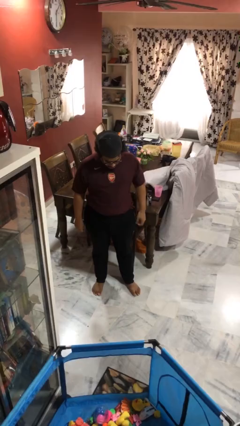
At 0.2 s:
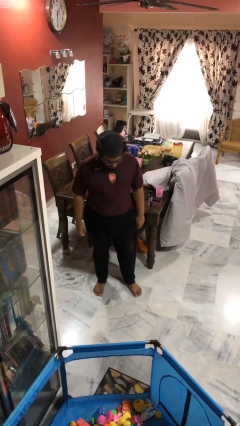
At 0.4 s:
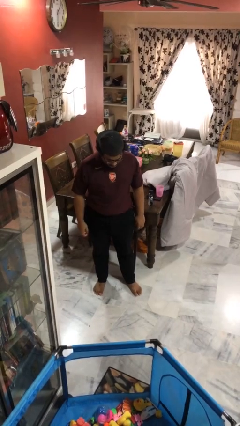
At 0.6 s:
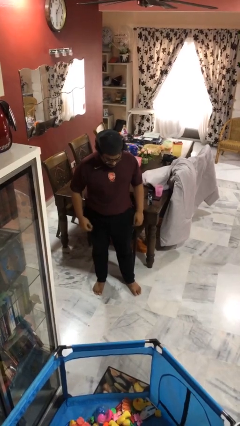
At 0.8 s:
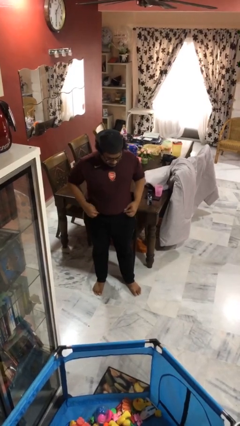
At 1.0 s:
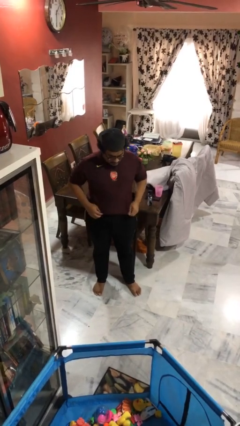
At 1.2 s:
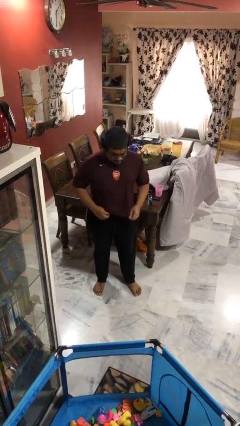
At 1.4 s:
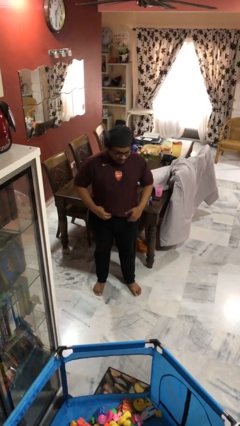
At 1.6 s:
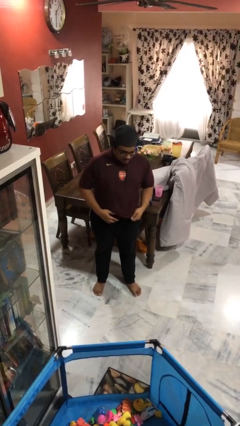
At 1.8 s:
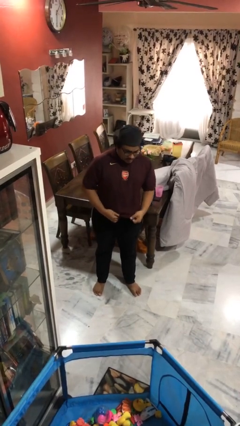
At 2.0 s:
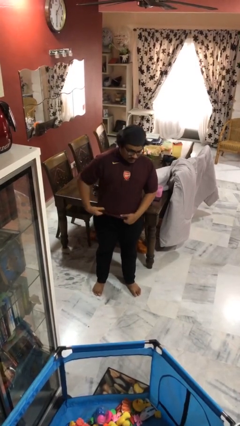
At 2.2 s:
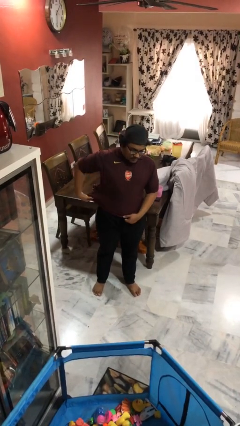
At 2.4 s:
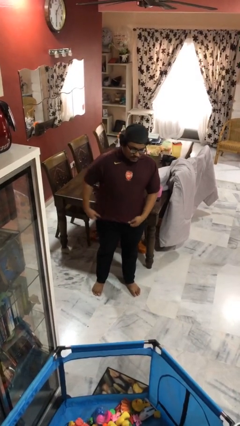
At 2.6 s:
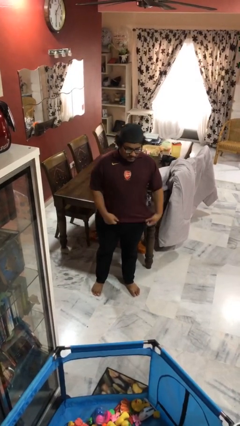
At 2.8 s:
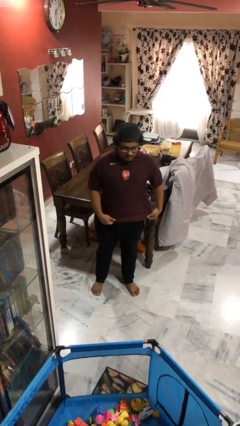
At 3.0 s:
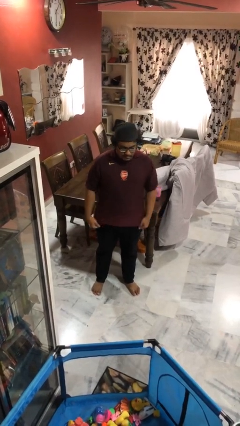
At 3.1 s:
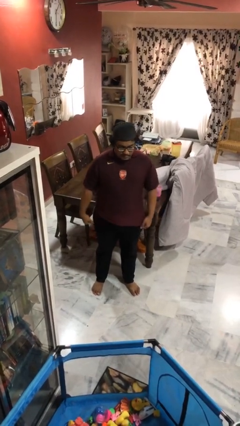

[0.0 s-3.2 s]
person untucks shirt

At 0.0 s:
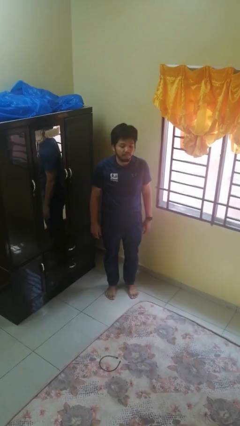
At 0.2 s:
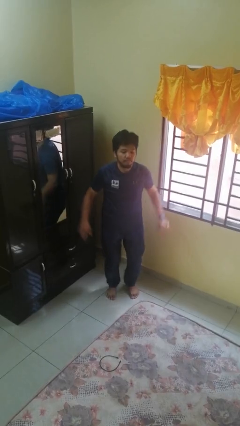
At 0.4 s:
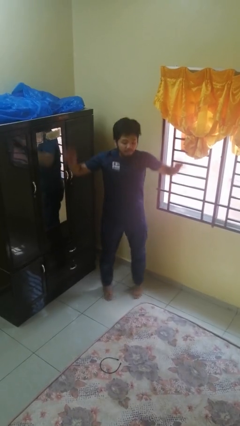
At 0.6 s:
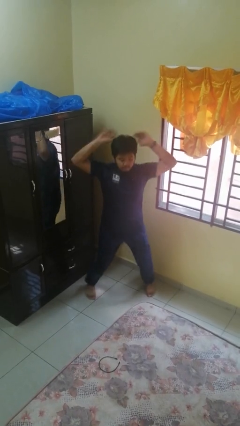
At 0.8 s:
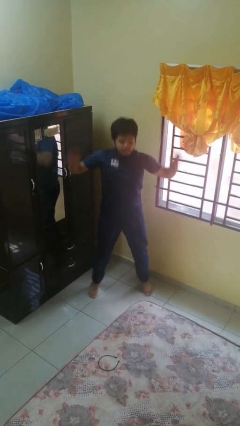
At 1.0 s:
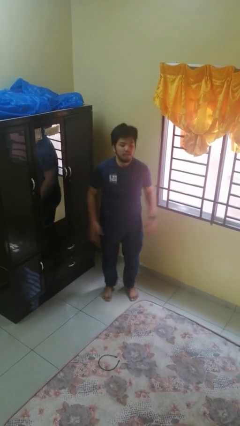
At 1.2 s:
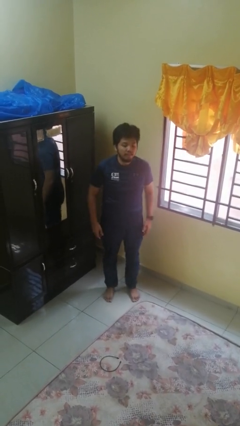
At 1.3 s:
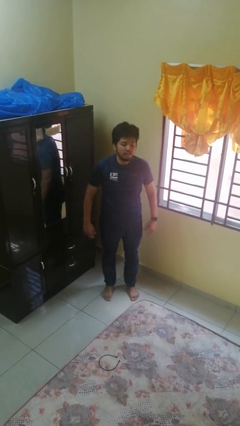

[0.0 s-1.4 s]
person exercises with jumping jacks

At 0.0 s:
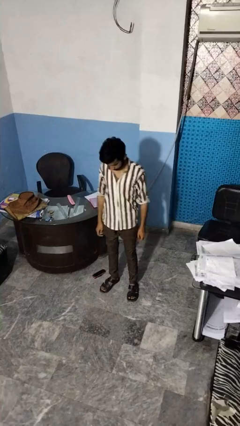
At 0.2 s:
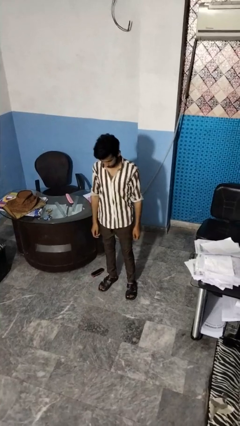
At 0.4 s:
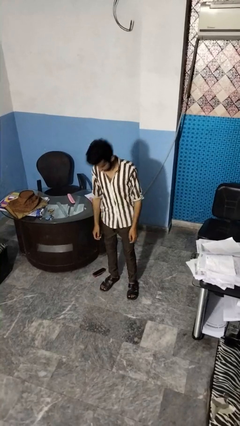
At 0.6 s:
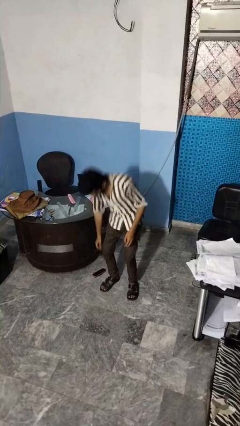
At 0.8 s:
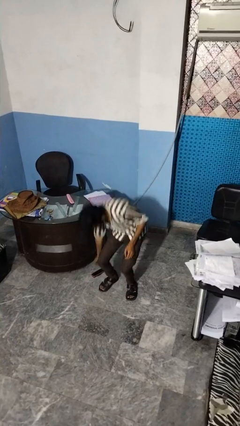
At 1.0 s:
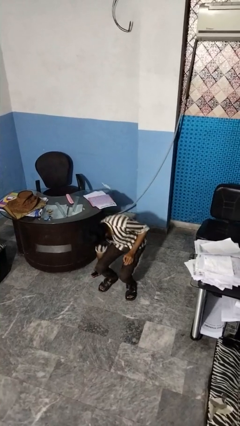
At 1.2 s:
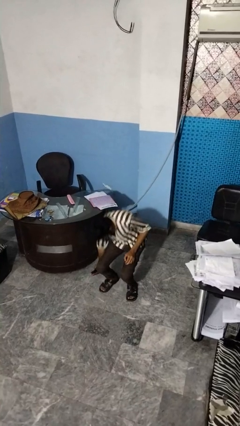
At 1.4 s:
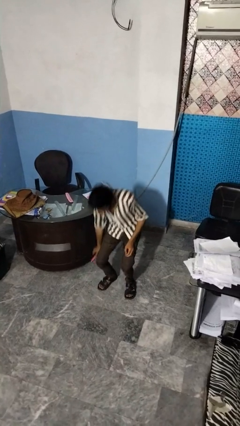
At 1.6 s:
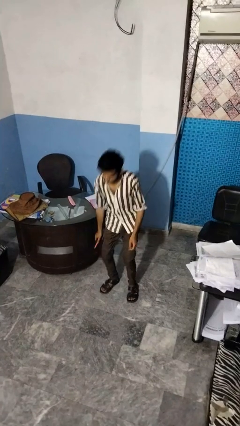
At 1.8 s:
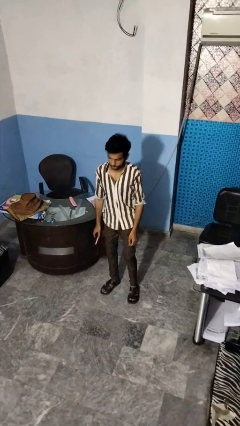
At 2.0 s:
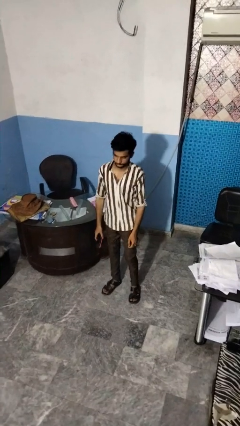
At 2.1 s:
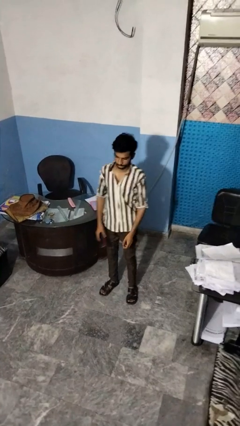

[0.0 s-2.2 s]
person picks up object from floor

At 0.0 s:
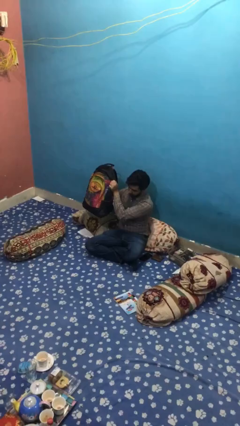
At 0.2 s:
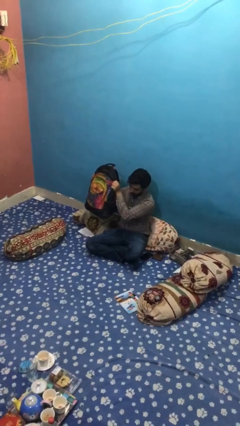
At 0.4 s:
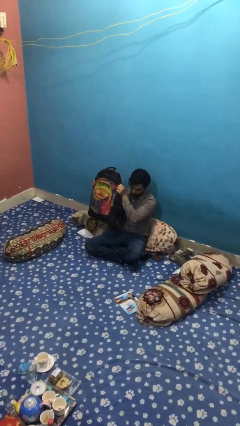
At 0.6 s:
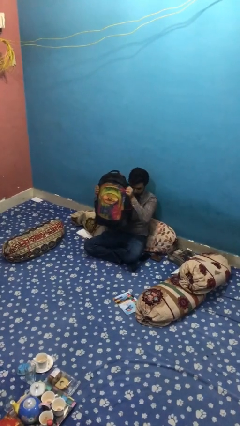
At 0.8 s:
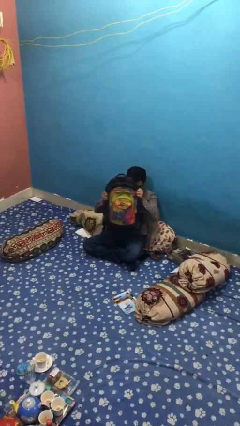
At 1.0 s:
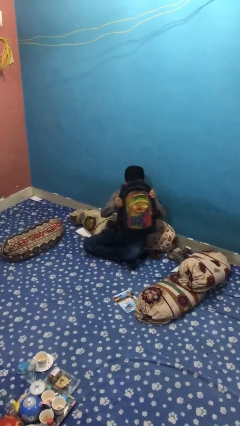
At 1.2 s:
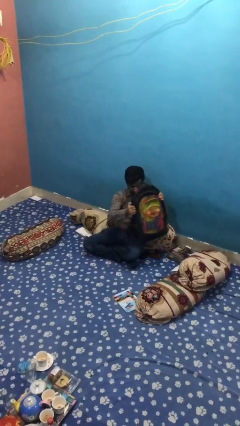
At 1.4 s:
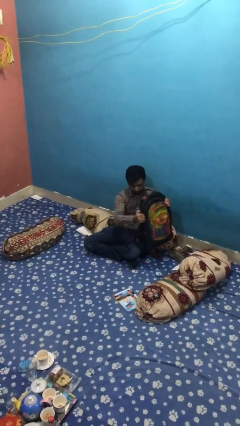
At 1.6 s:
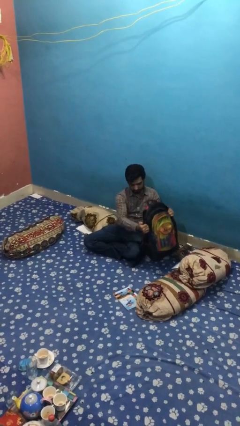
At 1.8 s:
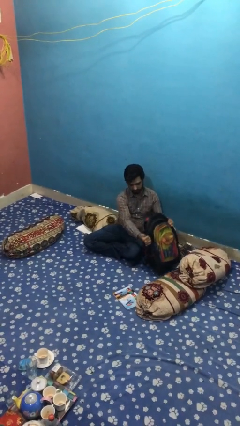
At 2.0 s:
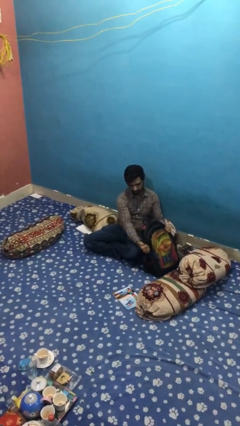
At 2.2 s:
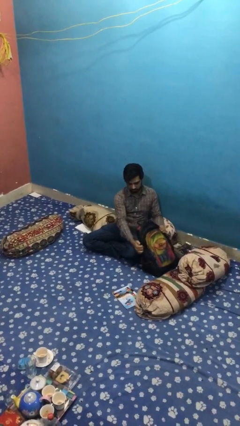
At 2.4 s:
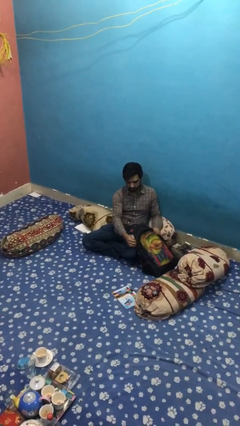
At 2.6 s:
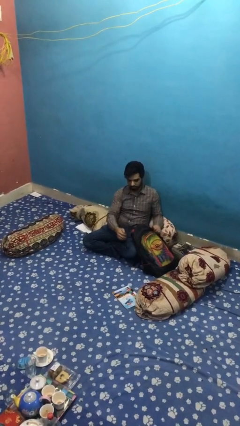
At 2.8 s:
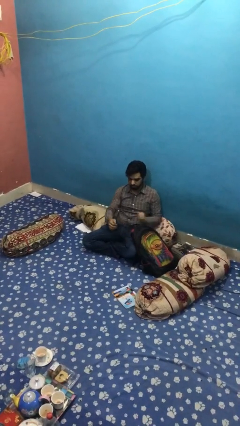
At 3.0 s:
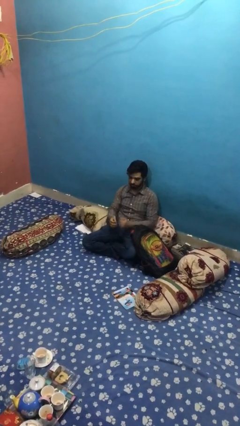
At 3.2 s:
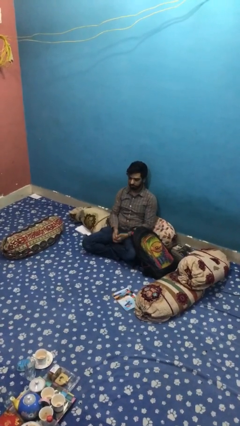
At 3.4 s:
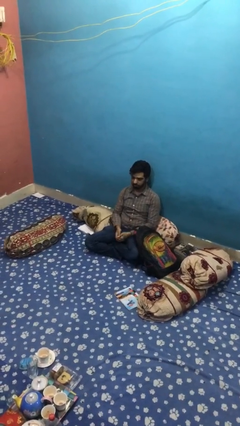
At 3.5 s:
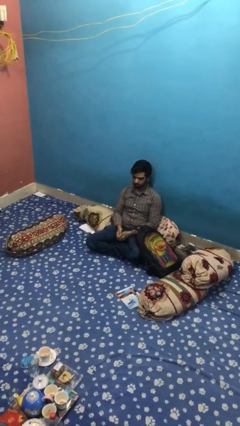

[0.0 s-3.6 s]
person puts down object on floor

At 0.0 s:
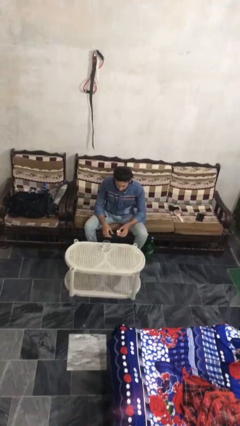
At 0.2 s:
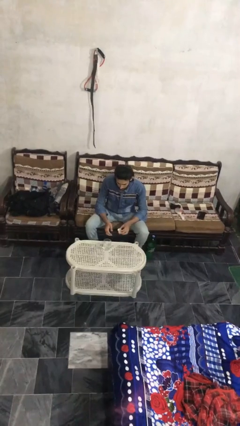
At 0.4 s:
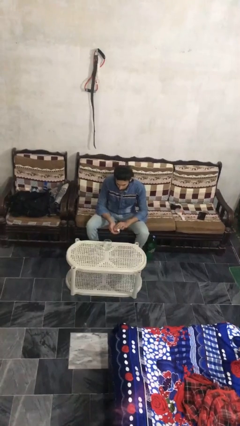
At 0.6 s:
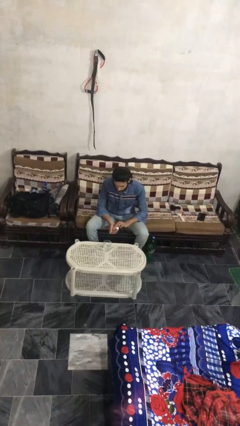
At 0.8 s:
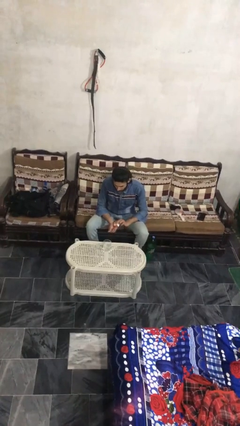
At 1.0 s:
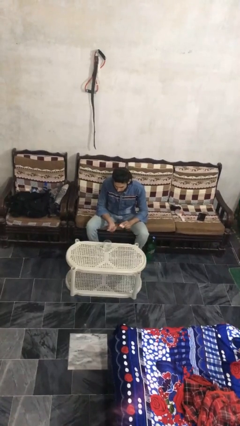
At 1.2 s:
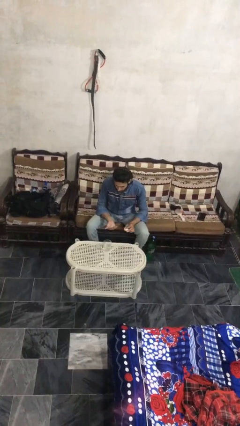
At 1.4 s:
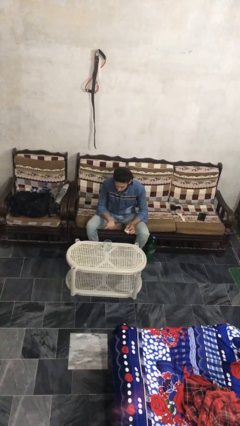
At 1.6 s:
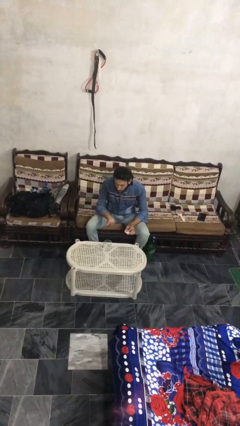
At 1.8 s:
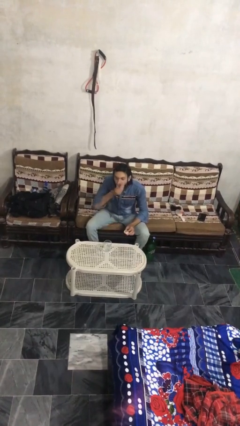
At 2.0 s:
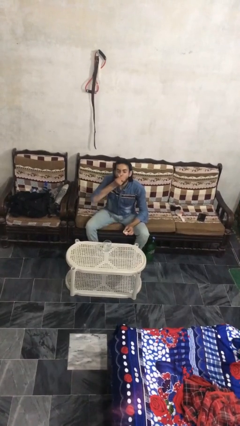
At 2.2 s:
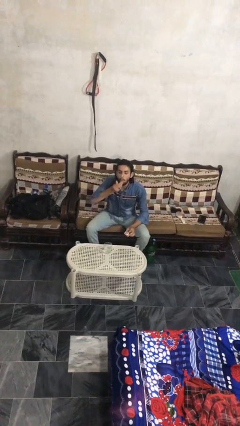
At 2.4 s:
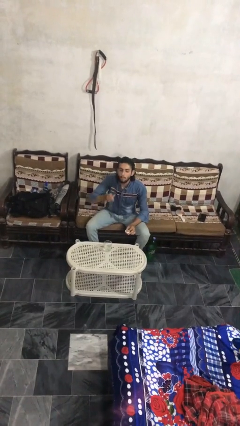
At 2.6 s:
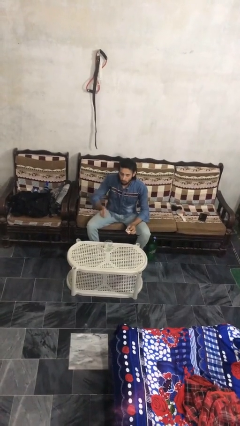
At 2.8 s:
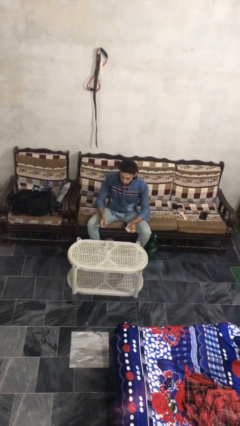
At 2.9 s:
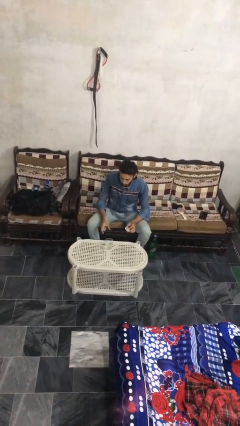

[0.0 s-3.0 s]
person takes medicine pills

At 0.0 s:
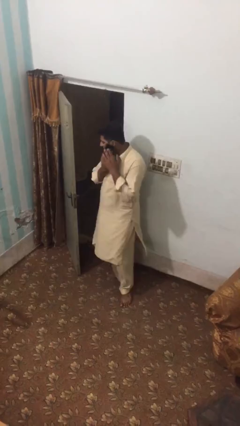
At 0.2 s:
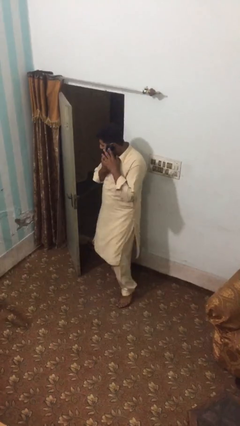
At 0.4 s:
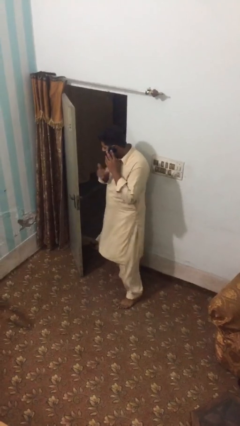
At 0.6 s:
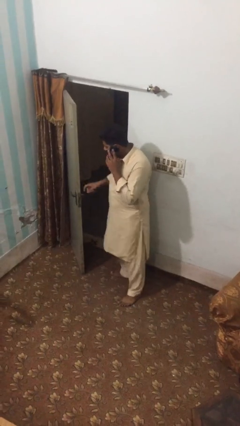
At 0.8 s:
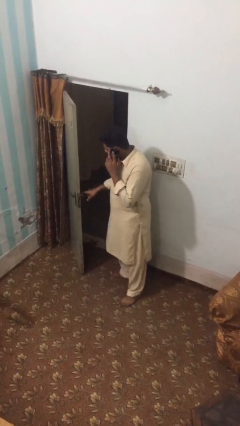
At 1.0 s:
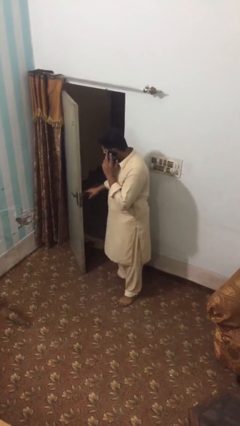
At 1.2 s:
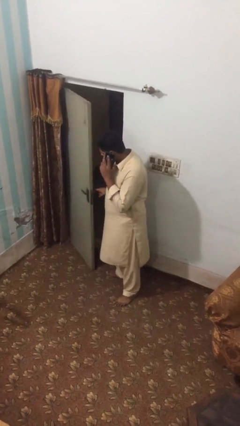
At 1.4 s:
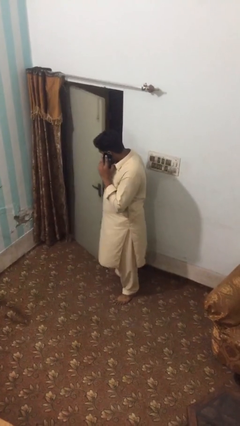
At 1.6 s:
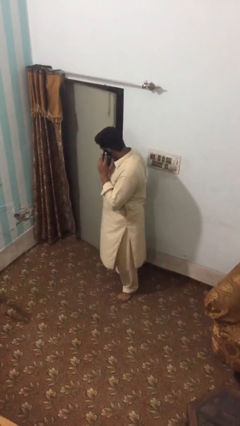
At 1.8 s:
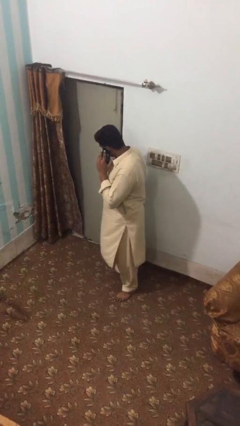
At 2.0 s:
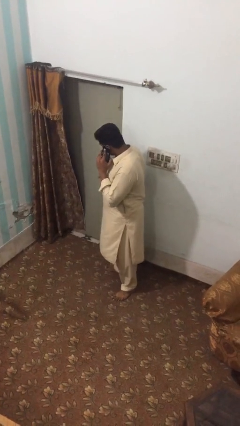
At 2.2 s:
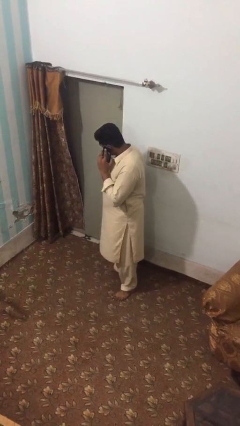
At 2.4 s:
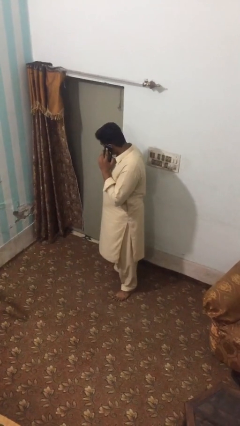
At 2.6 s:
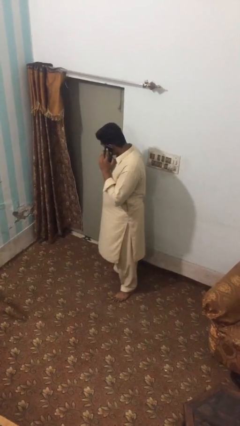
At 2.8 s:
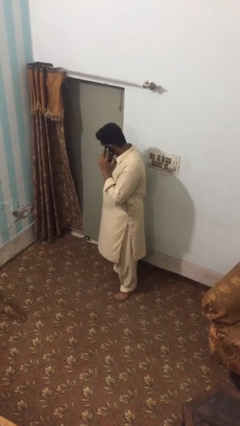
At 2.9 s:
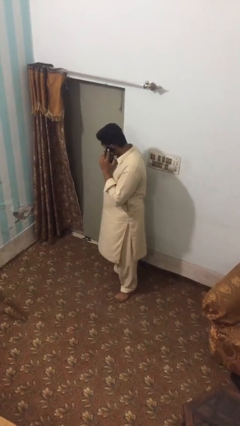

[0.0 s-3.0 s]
person closes facility door

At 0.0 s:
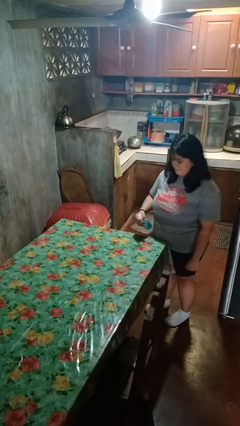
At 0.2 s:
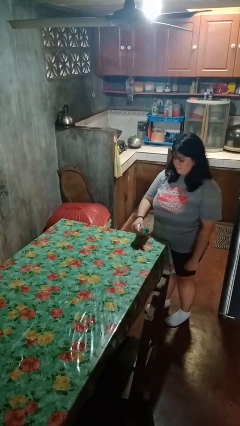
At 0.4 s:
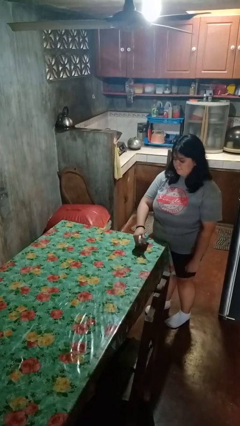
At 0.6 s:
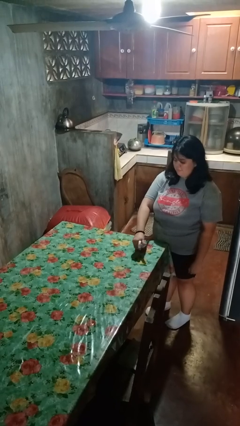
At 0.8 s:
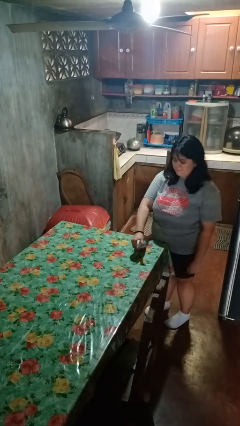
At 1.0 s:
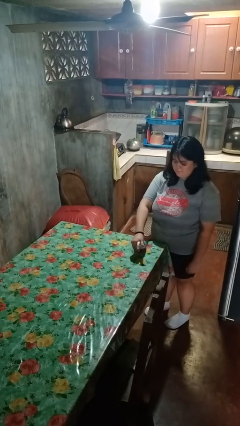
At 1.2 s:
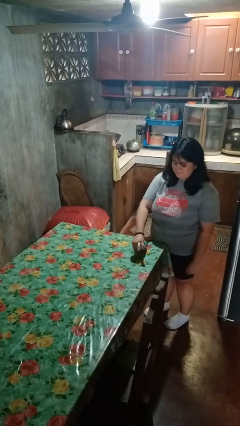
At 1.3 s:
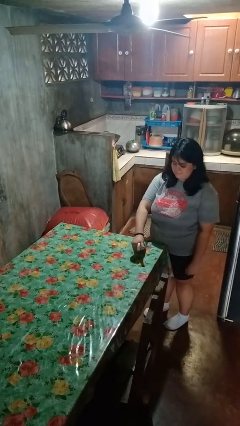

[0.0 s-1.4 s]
person sprays from bottle
